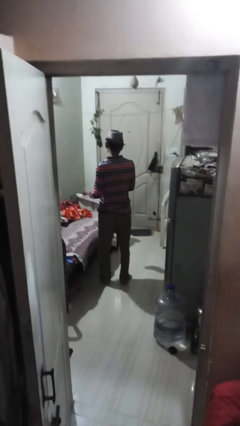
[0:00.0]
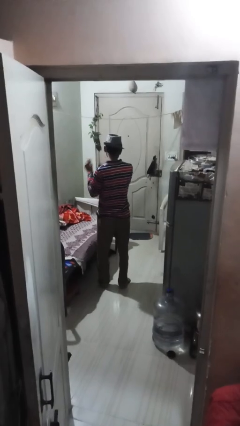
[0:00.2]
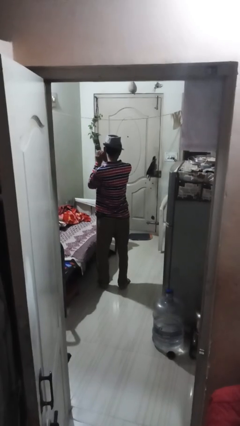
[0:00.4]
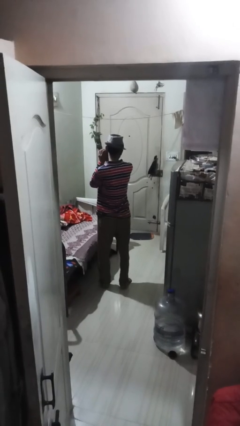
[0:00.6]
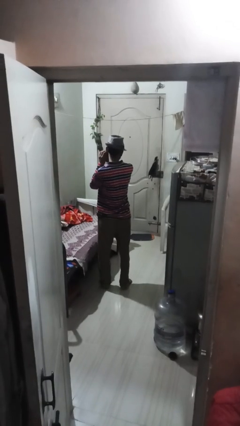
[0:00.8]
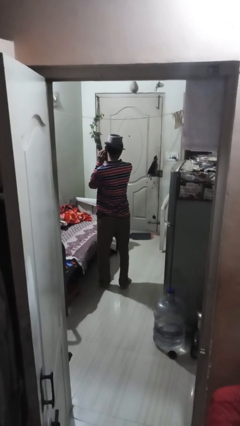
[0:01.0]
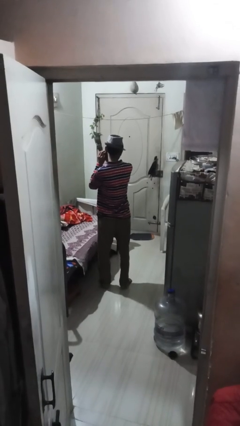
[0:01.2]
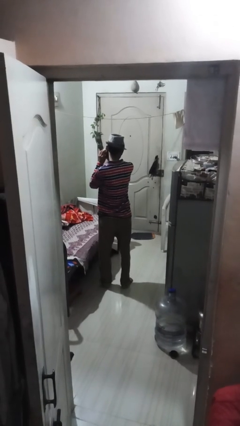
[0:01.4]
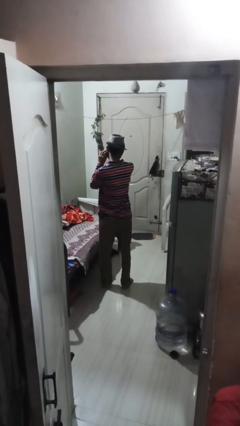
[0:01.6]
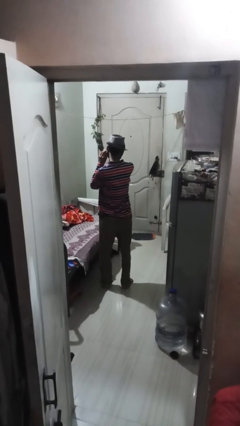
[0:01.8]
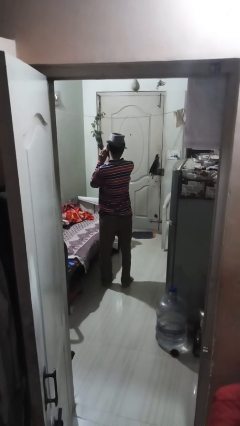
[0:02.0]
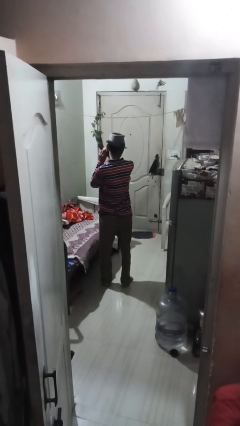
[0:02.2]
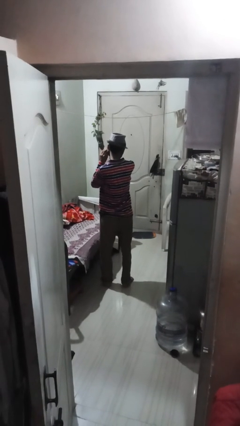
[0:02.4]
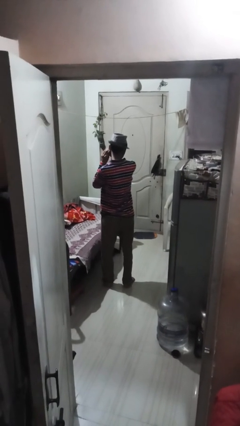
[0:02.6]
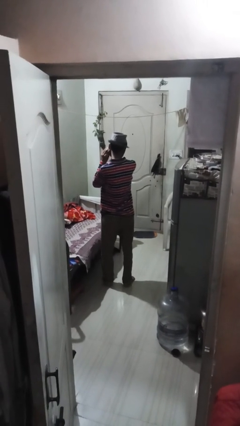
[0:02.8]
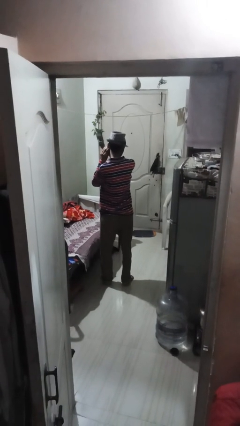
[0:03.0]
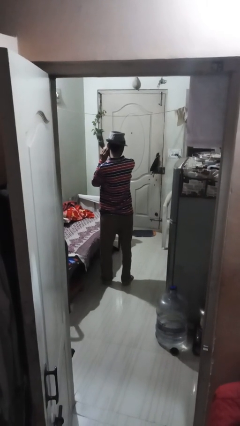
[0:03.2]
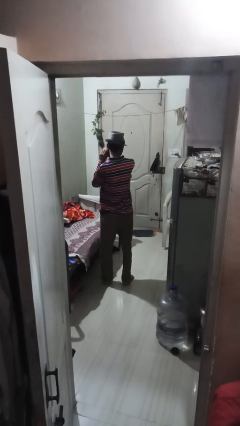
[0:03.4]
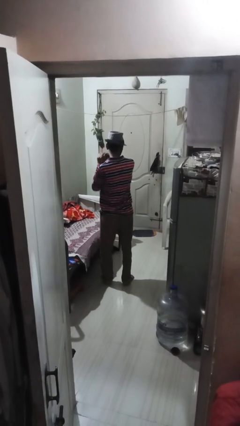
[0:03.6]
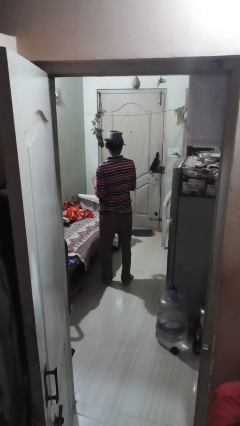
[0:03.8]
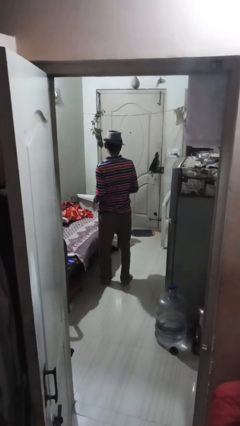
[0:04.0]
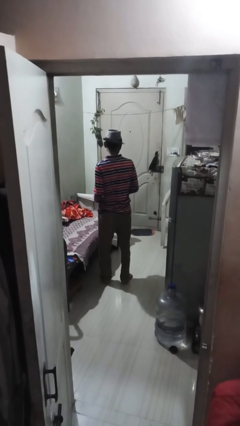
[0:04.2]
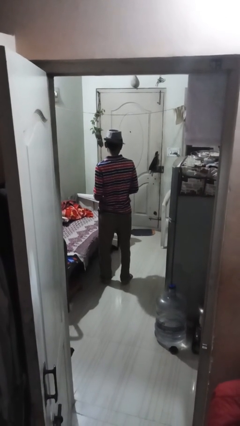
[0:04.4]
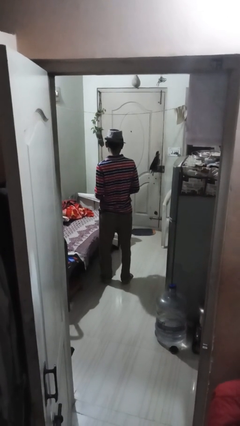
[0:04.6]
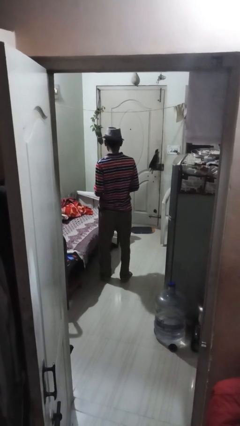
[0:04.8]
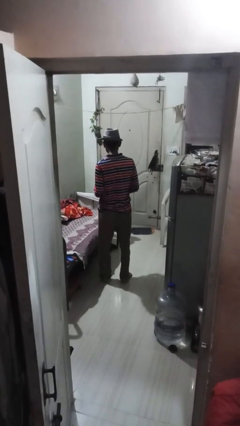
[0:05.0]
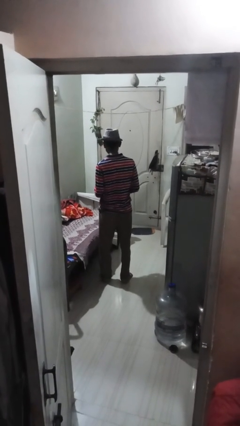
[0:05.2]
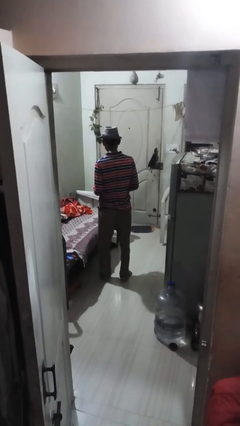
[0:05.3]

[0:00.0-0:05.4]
person takes off earrings

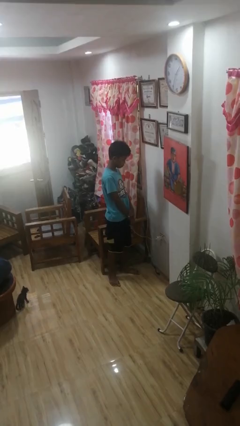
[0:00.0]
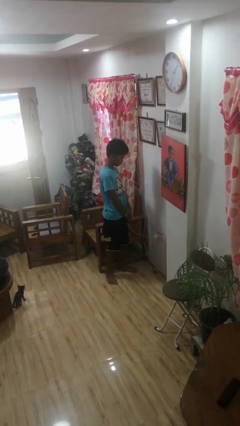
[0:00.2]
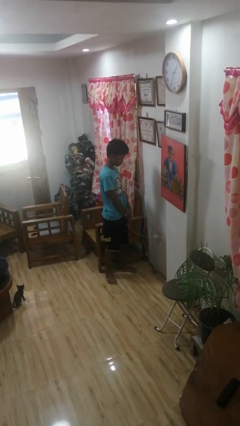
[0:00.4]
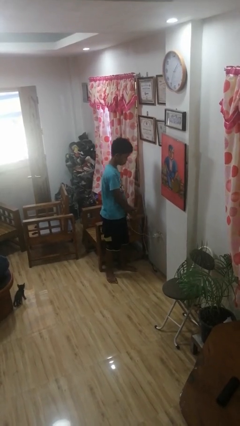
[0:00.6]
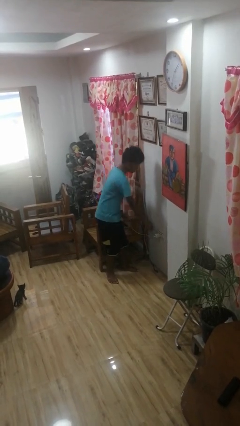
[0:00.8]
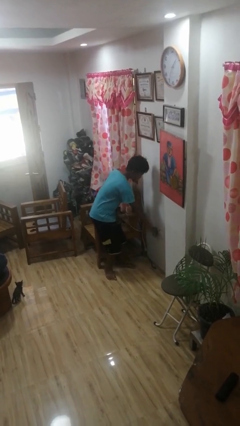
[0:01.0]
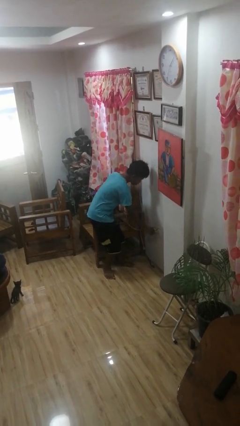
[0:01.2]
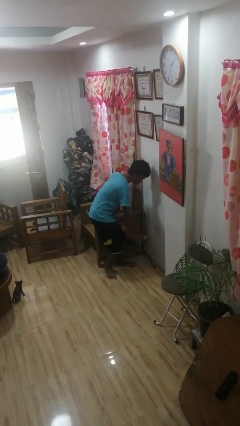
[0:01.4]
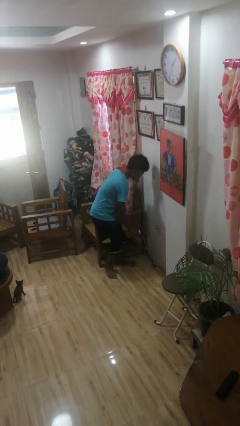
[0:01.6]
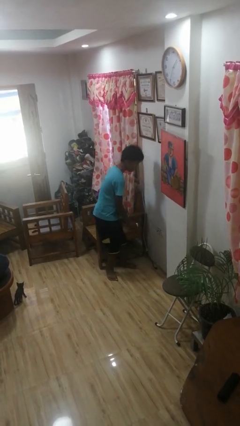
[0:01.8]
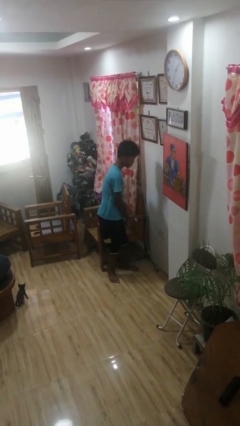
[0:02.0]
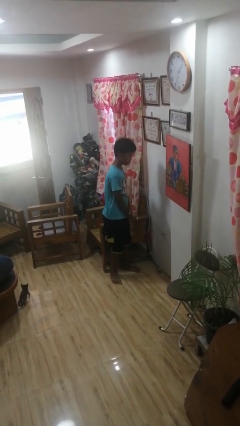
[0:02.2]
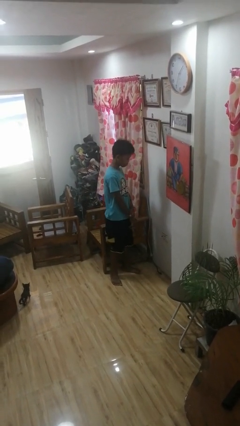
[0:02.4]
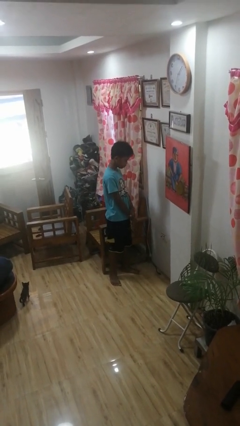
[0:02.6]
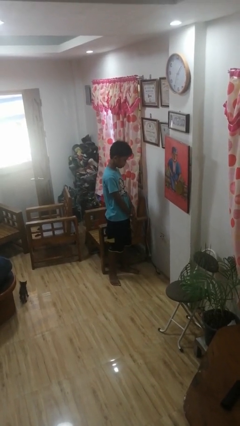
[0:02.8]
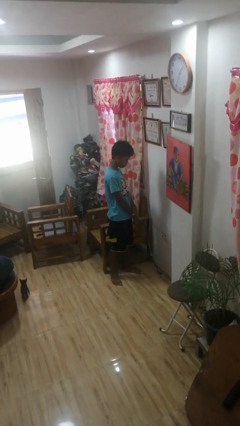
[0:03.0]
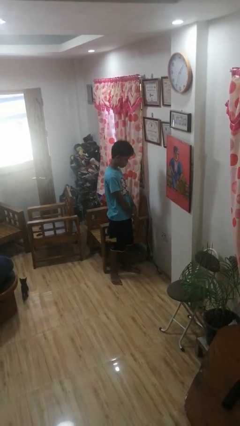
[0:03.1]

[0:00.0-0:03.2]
person unplugs from electrical socket

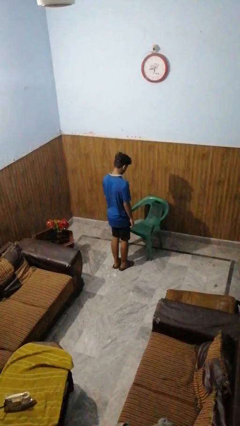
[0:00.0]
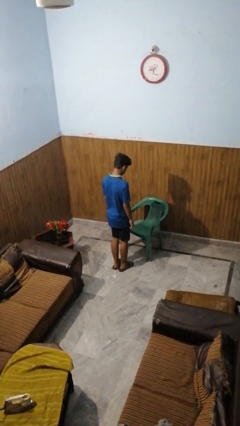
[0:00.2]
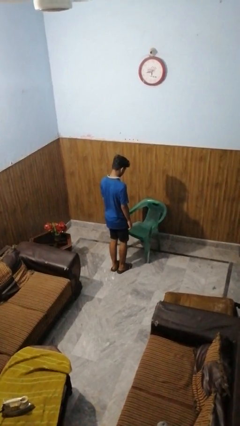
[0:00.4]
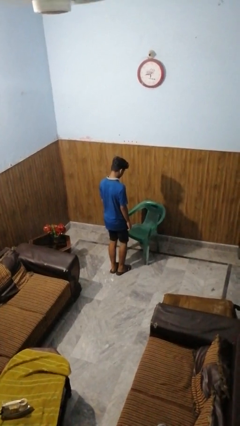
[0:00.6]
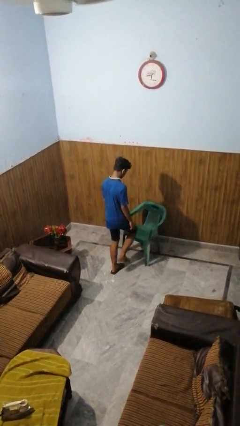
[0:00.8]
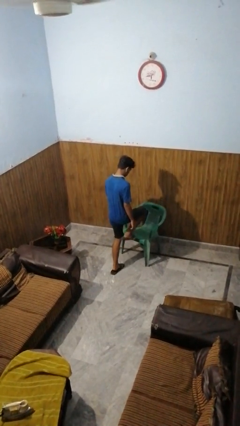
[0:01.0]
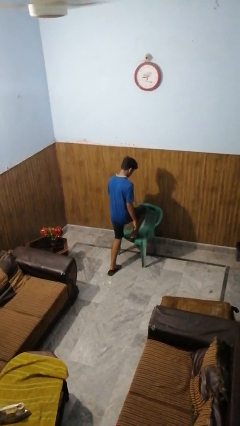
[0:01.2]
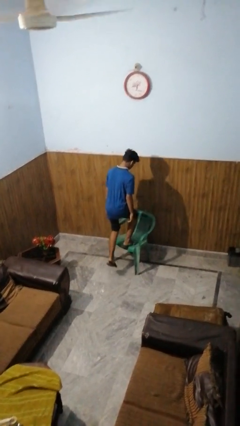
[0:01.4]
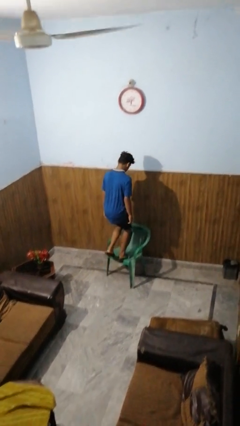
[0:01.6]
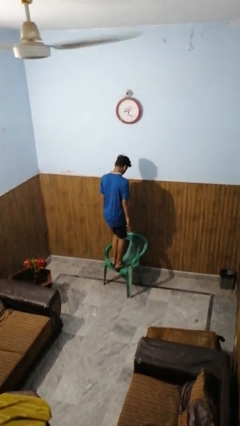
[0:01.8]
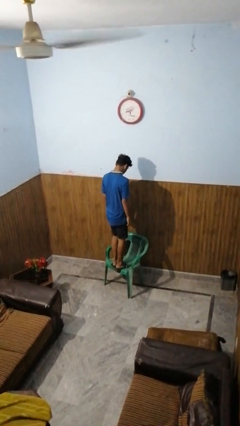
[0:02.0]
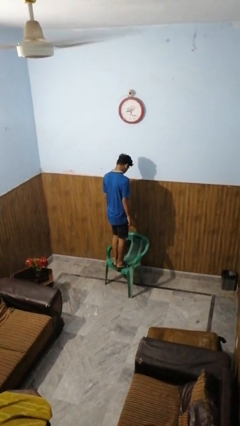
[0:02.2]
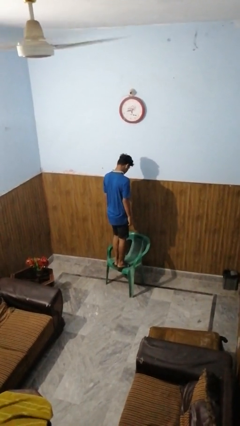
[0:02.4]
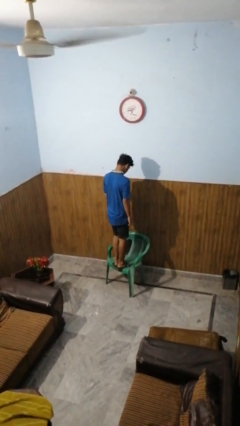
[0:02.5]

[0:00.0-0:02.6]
person climbs on chair

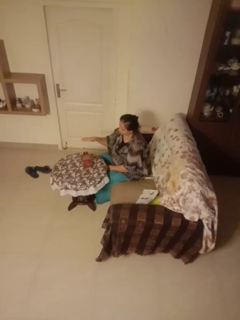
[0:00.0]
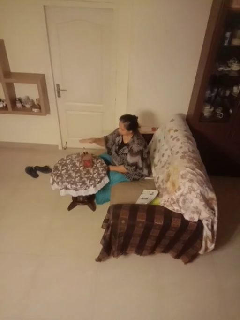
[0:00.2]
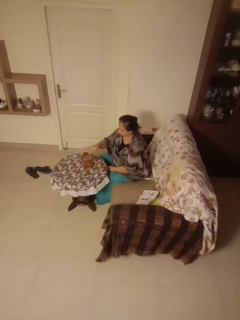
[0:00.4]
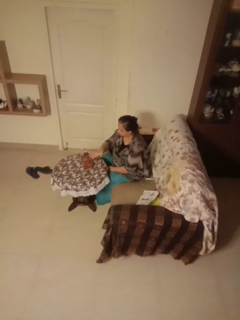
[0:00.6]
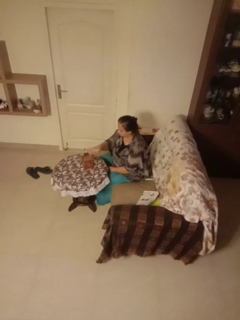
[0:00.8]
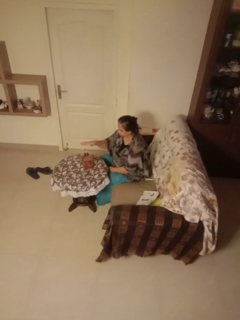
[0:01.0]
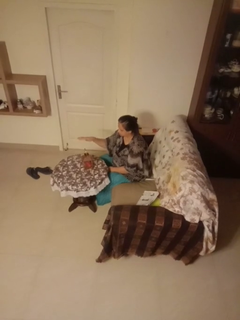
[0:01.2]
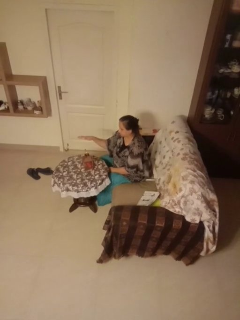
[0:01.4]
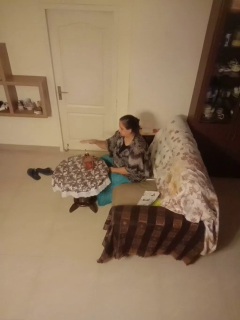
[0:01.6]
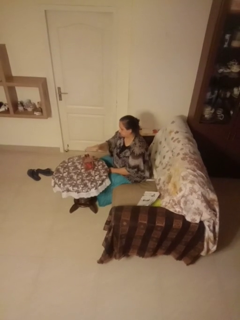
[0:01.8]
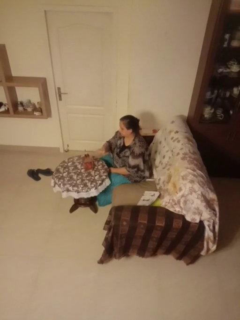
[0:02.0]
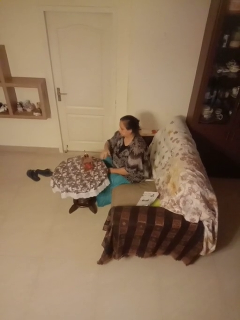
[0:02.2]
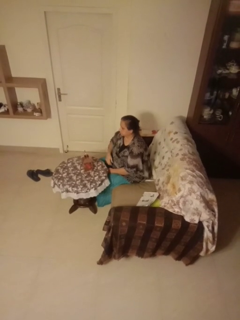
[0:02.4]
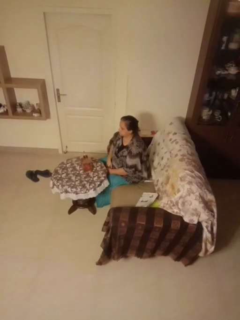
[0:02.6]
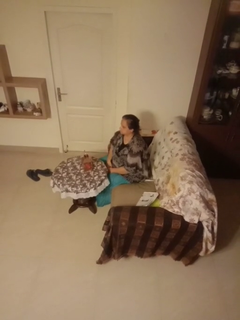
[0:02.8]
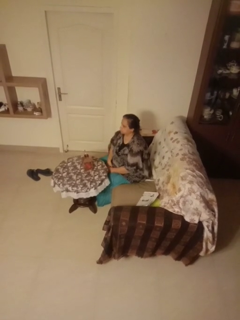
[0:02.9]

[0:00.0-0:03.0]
person waves hand over object

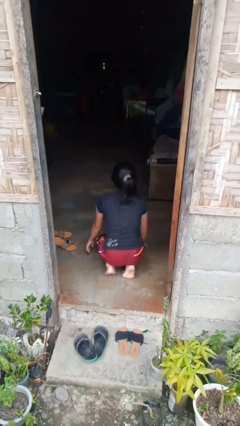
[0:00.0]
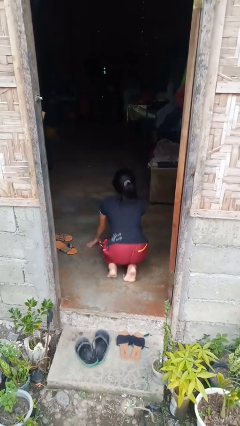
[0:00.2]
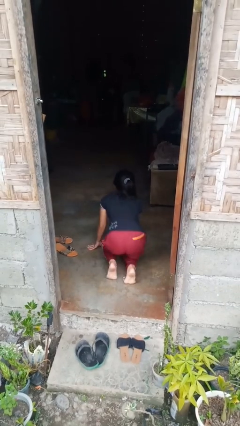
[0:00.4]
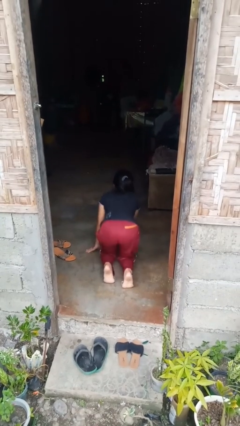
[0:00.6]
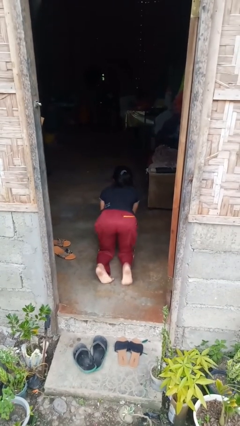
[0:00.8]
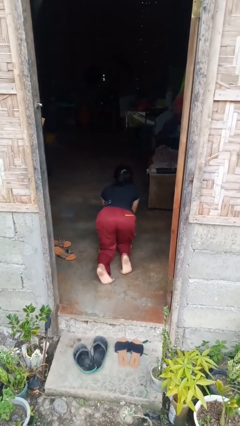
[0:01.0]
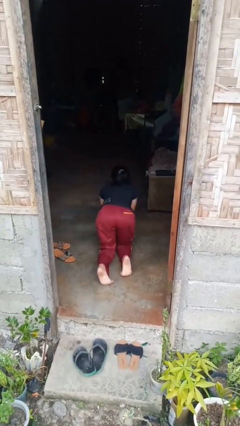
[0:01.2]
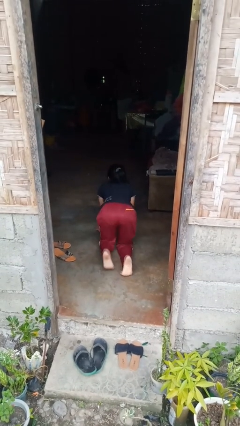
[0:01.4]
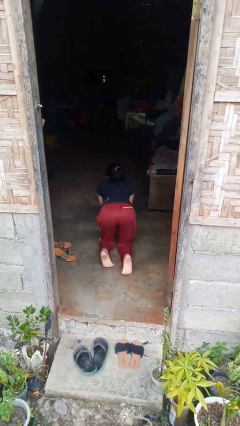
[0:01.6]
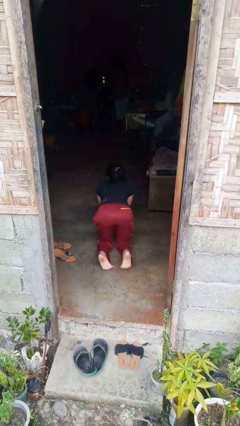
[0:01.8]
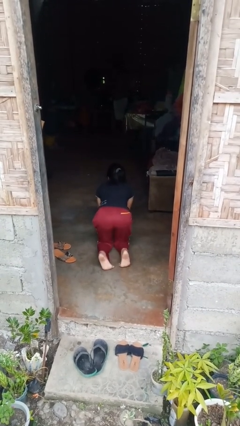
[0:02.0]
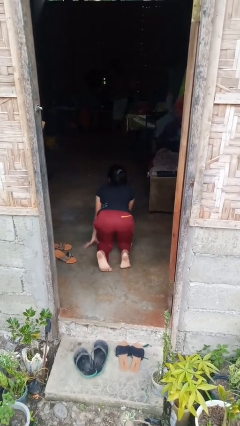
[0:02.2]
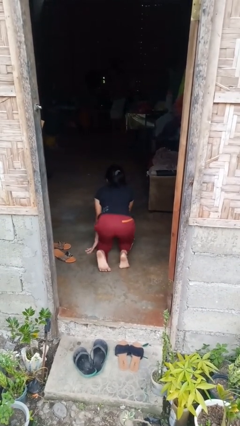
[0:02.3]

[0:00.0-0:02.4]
person crawls

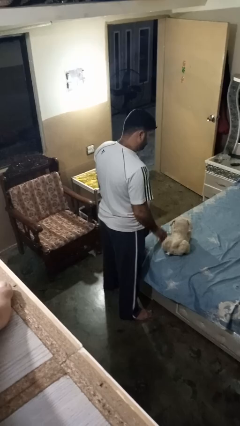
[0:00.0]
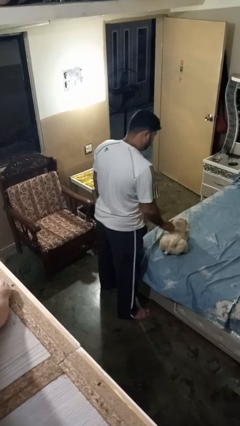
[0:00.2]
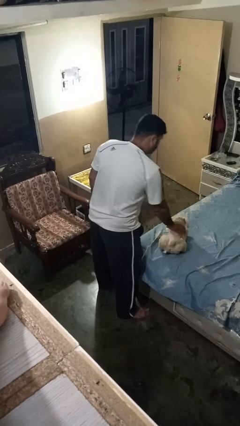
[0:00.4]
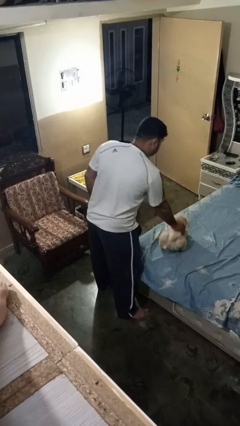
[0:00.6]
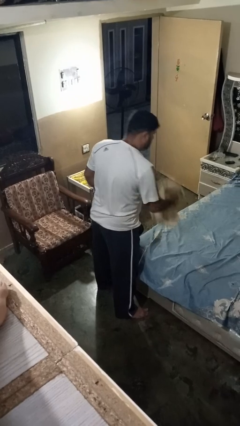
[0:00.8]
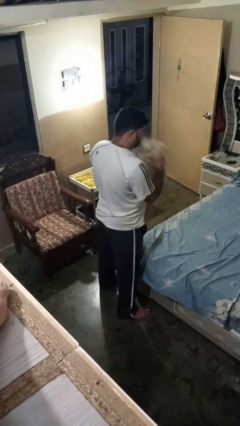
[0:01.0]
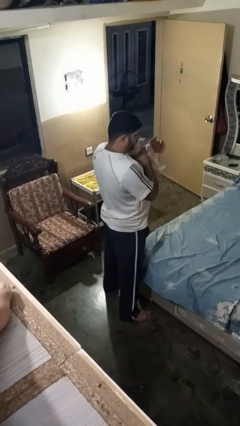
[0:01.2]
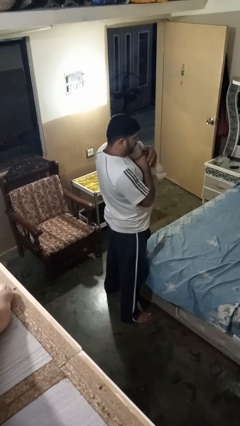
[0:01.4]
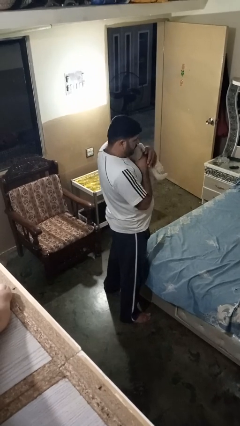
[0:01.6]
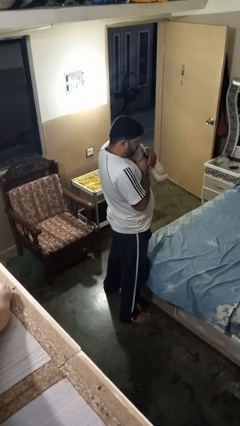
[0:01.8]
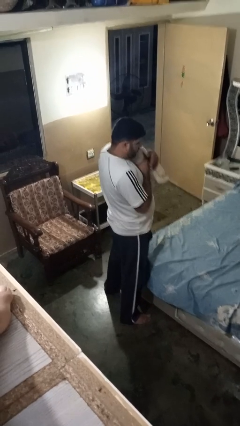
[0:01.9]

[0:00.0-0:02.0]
person hugs stuffed animal
